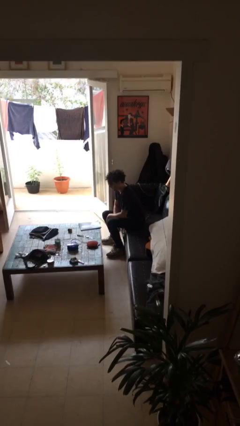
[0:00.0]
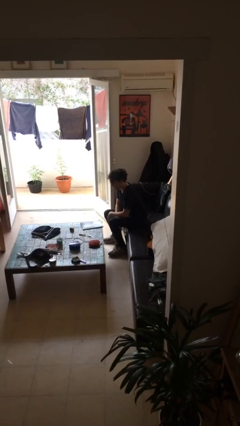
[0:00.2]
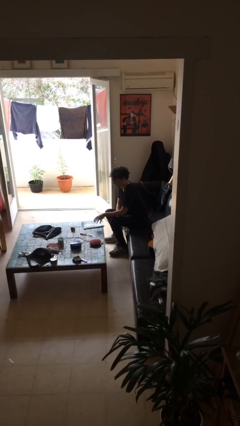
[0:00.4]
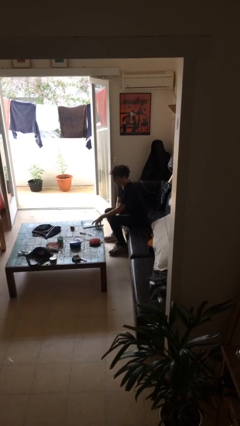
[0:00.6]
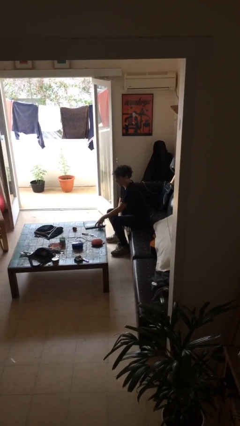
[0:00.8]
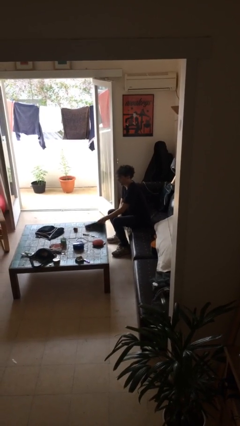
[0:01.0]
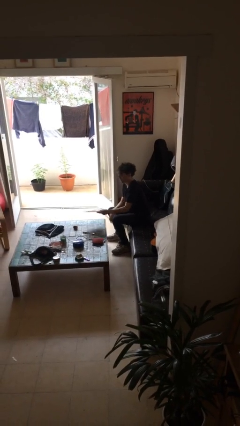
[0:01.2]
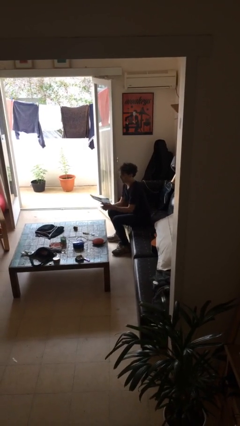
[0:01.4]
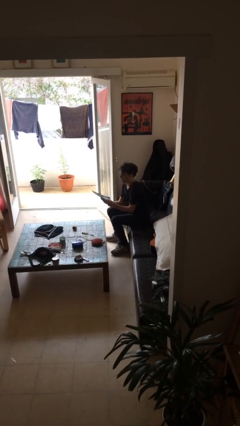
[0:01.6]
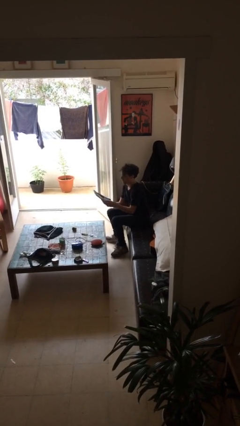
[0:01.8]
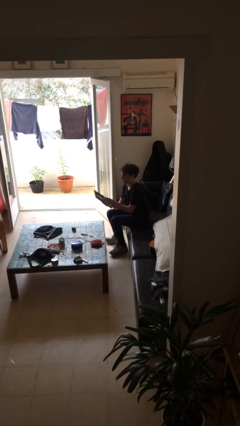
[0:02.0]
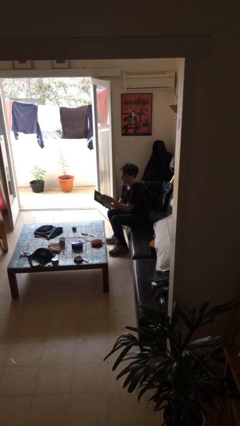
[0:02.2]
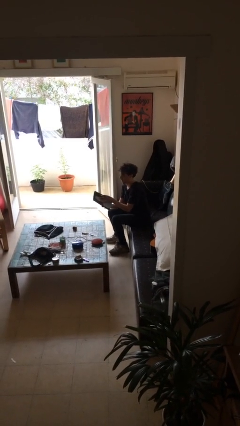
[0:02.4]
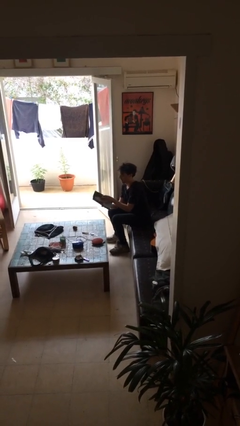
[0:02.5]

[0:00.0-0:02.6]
person picks up object from table

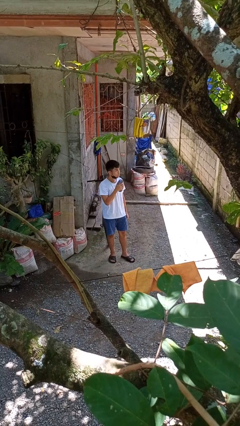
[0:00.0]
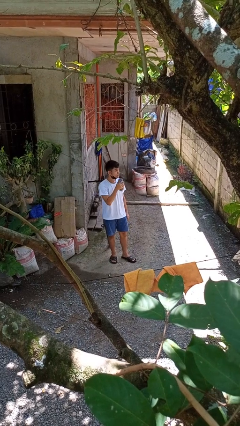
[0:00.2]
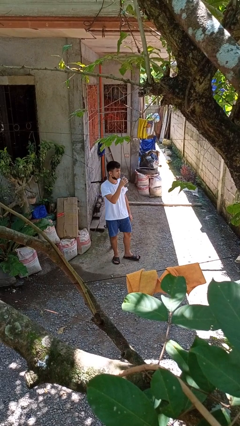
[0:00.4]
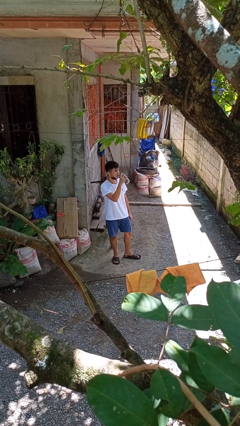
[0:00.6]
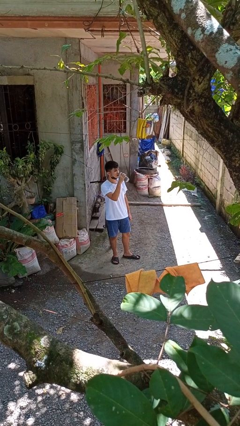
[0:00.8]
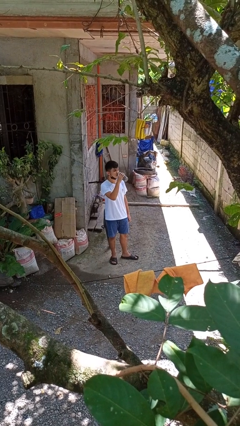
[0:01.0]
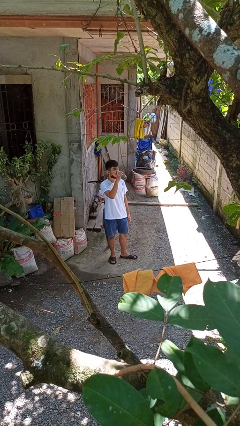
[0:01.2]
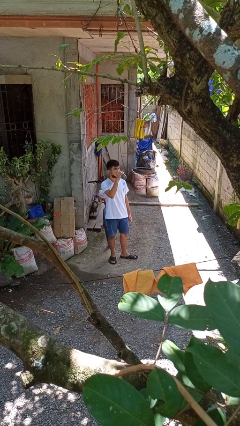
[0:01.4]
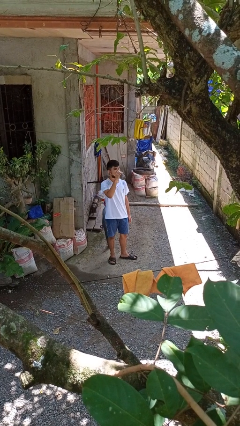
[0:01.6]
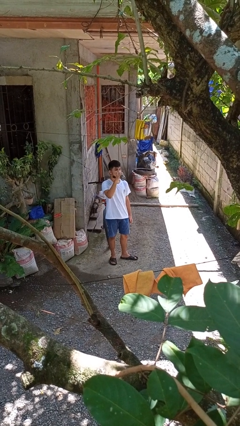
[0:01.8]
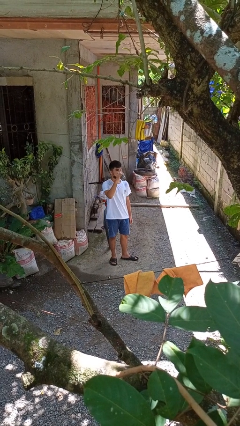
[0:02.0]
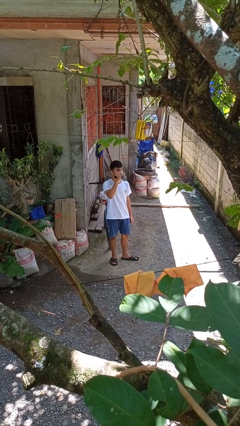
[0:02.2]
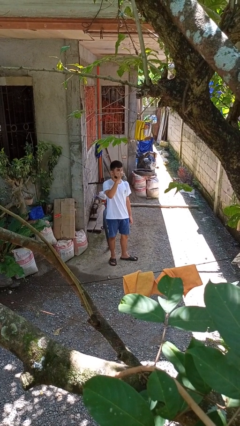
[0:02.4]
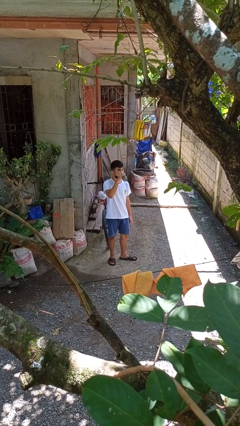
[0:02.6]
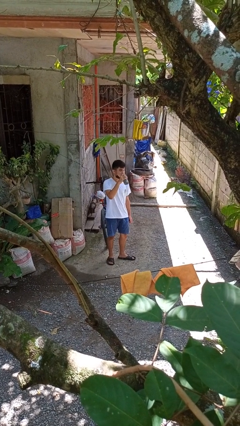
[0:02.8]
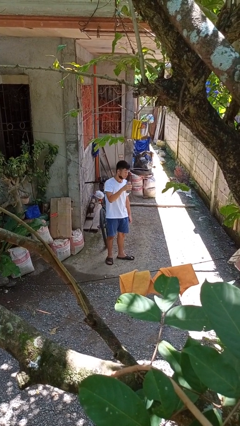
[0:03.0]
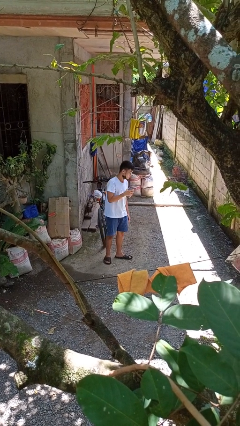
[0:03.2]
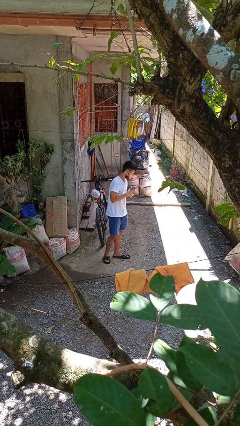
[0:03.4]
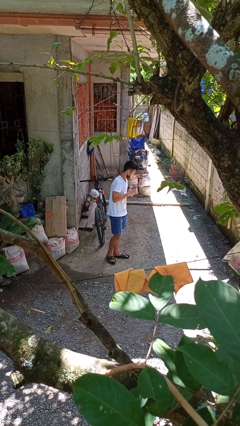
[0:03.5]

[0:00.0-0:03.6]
person drinks from bottle

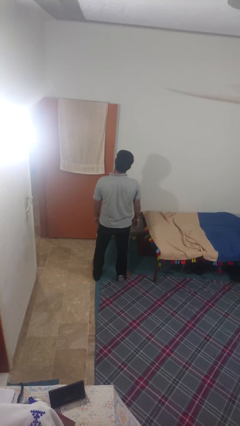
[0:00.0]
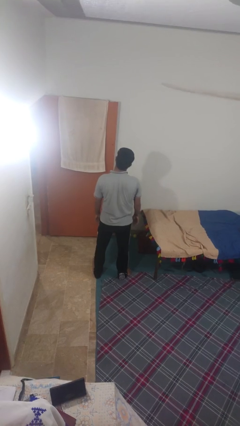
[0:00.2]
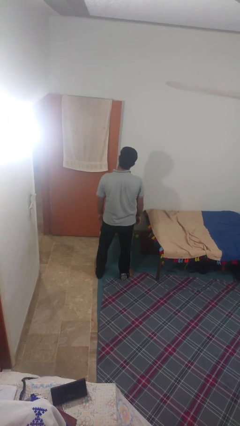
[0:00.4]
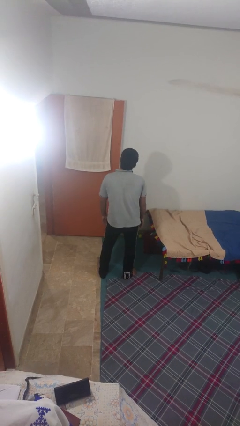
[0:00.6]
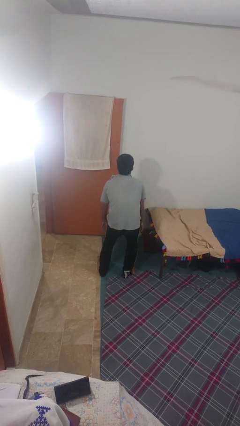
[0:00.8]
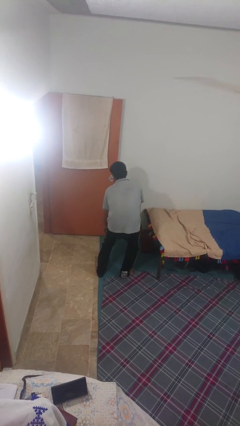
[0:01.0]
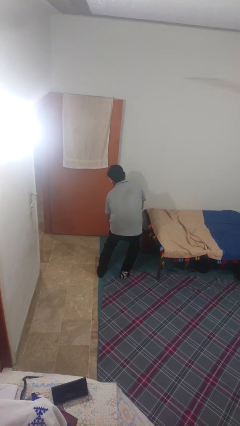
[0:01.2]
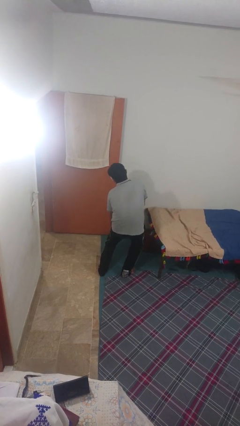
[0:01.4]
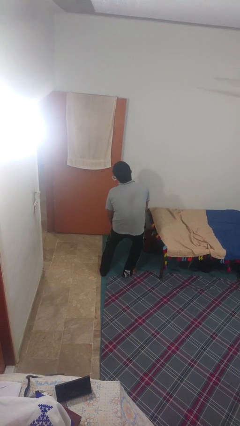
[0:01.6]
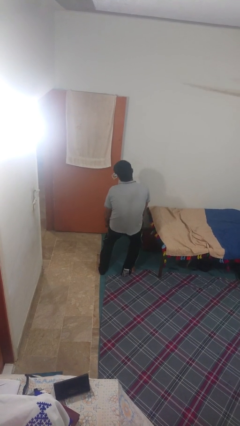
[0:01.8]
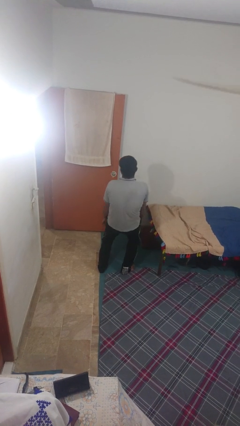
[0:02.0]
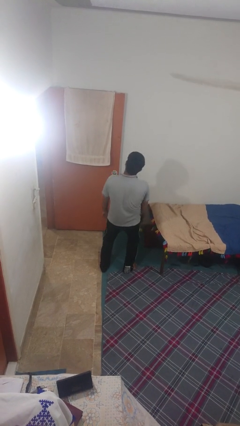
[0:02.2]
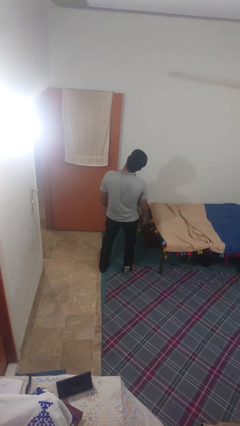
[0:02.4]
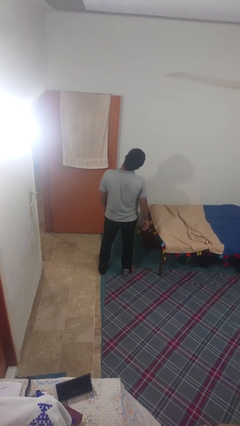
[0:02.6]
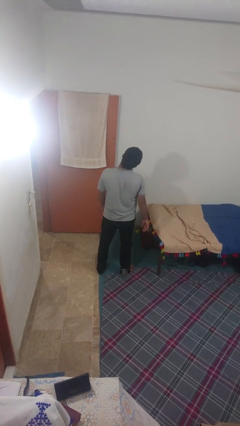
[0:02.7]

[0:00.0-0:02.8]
person gestures hang loose

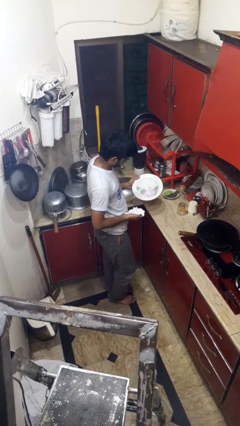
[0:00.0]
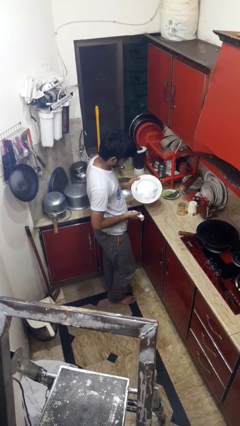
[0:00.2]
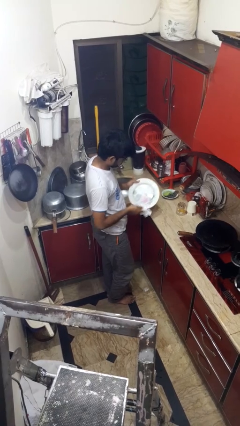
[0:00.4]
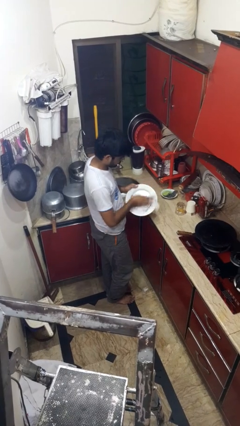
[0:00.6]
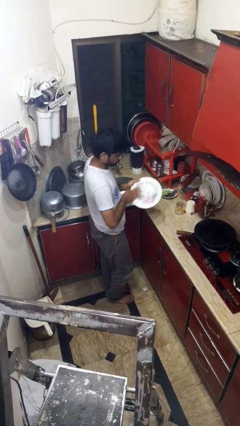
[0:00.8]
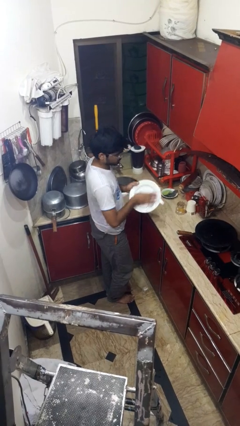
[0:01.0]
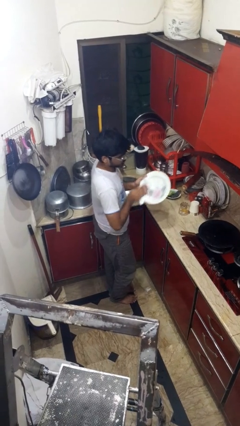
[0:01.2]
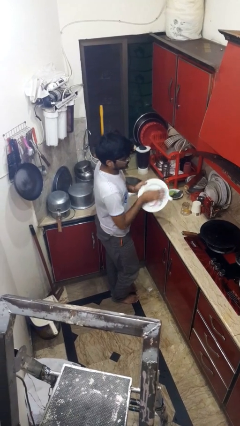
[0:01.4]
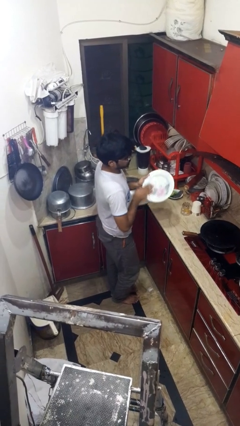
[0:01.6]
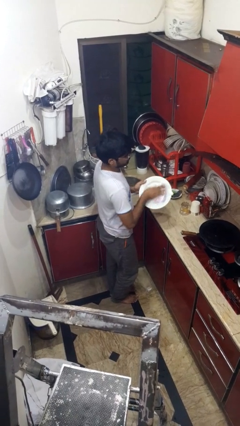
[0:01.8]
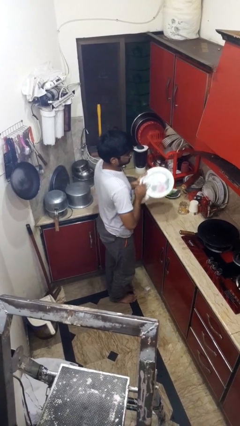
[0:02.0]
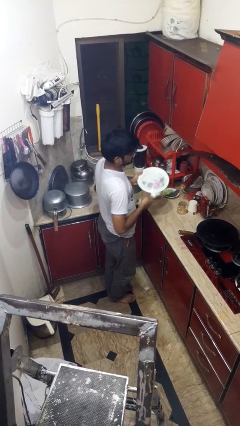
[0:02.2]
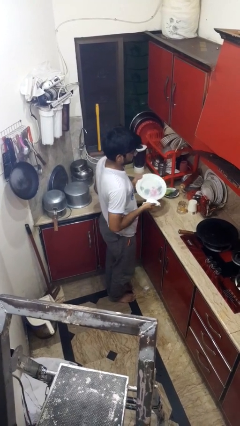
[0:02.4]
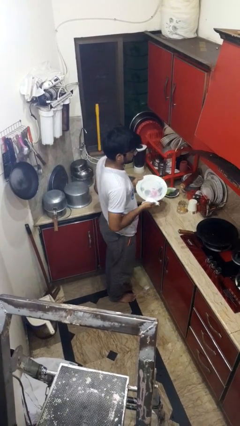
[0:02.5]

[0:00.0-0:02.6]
person dries dish

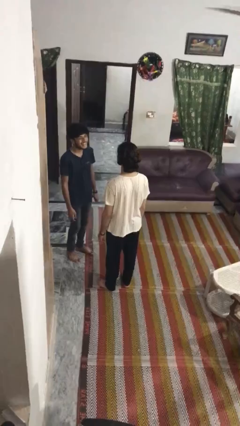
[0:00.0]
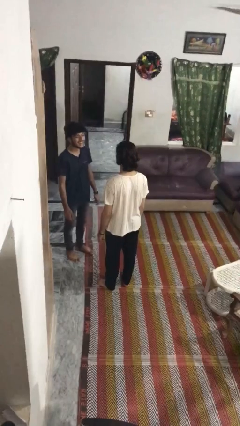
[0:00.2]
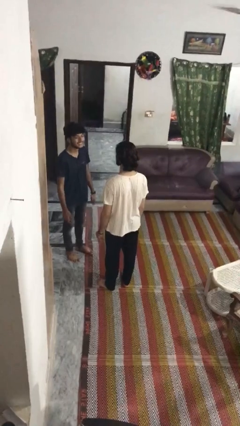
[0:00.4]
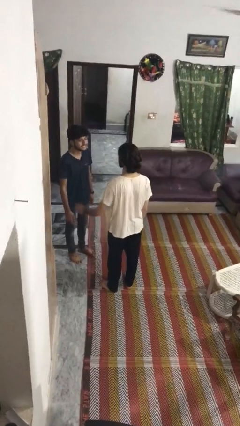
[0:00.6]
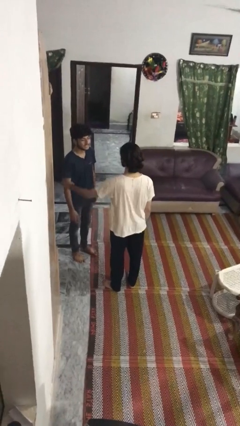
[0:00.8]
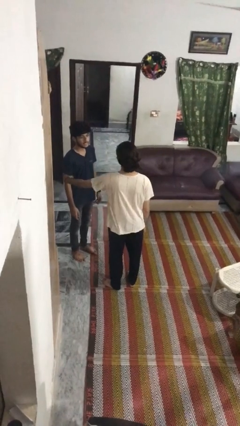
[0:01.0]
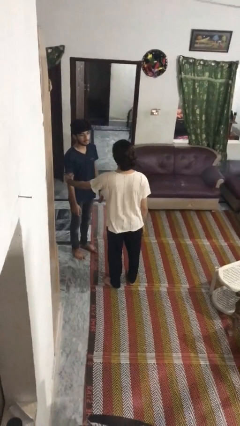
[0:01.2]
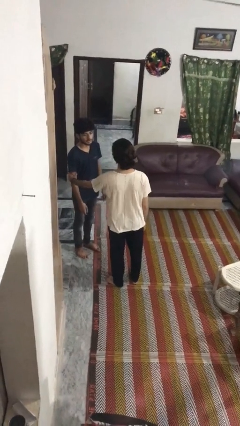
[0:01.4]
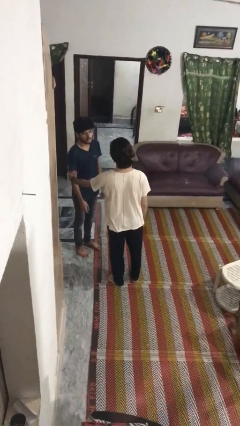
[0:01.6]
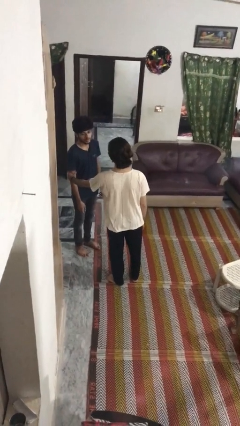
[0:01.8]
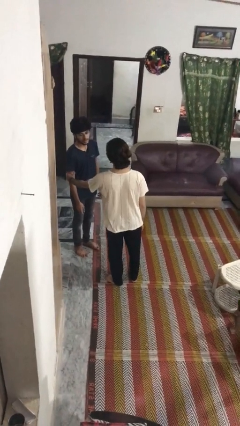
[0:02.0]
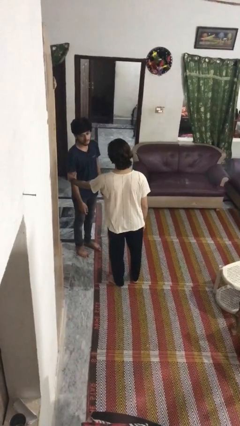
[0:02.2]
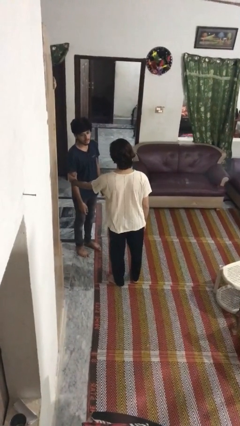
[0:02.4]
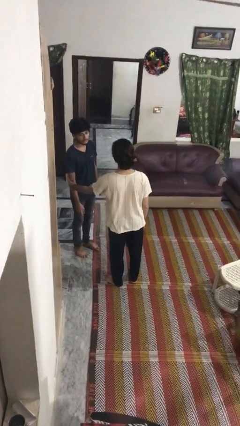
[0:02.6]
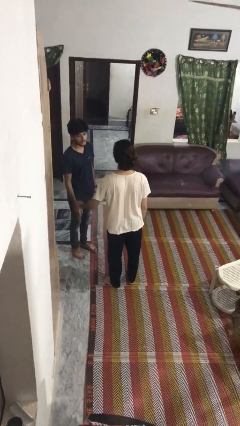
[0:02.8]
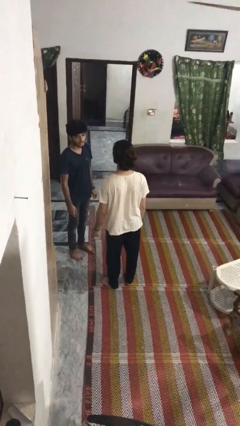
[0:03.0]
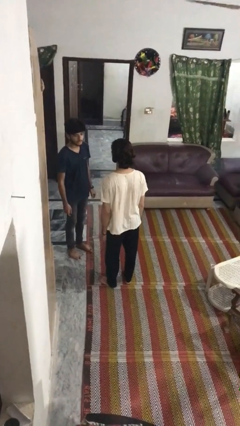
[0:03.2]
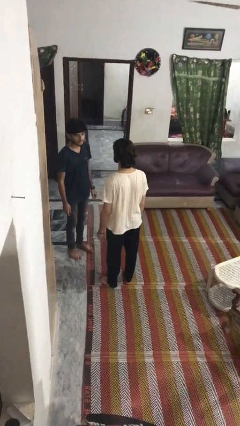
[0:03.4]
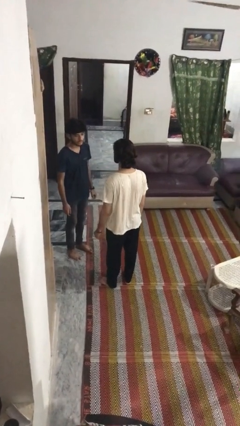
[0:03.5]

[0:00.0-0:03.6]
person grabs person by bicep

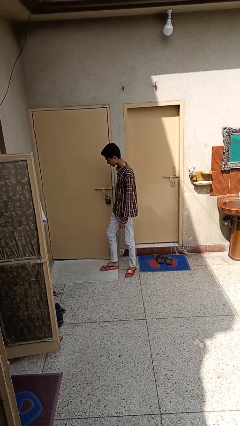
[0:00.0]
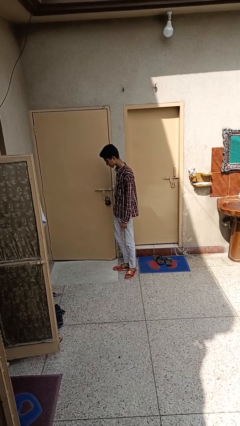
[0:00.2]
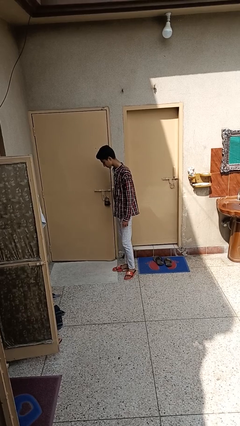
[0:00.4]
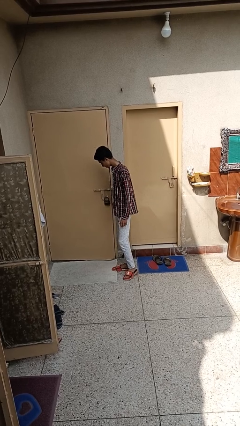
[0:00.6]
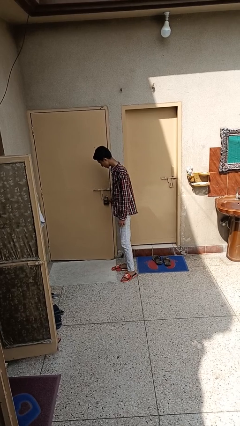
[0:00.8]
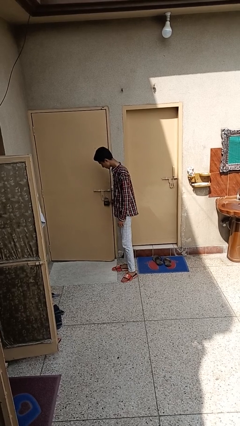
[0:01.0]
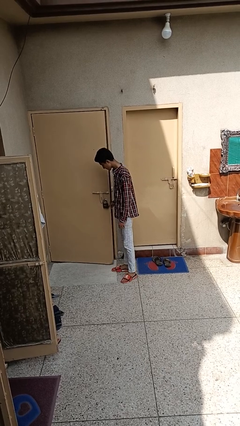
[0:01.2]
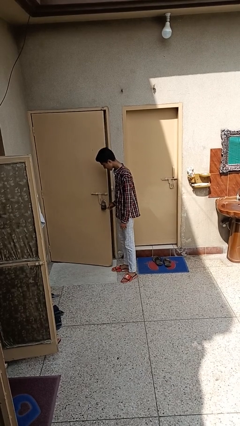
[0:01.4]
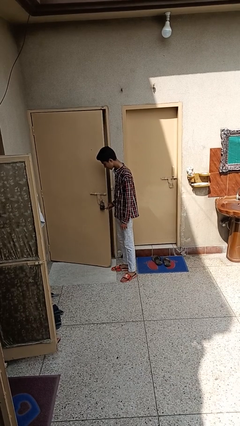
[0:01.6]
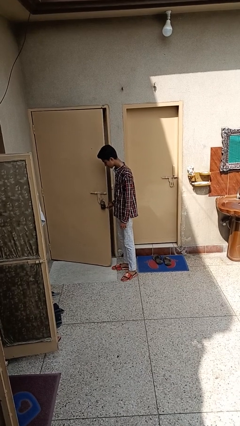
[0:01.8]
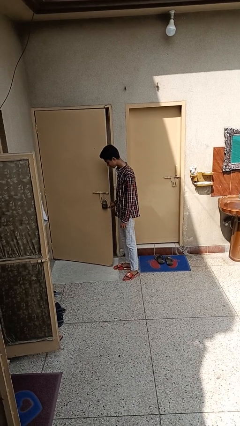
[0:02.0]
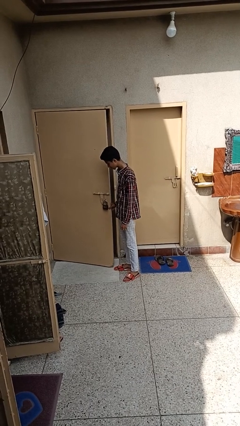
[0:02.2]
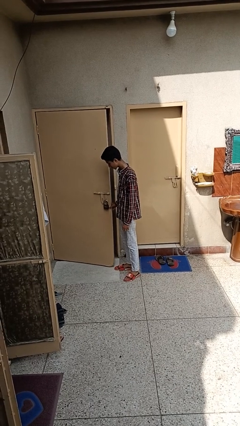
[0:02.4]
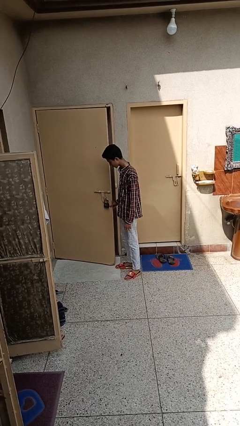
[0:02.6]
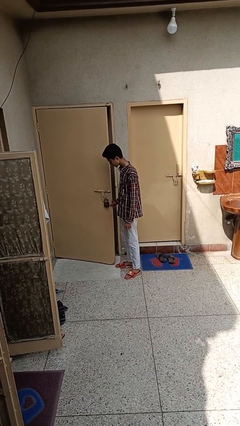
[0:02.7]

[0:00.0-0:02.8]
person opens facility door
